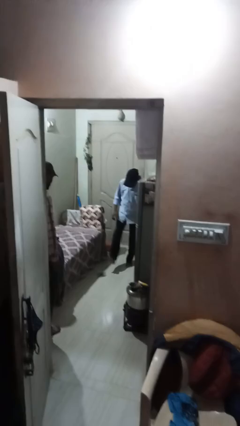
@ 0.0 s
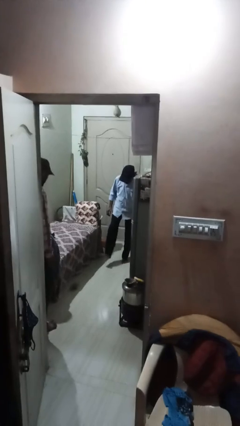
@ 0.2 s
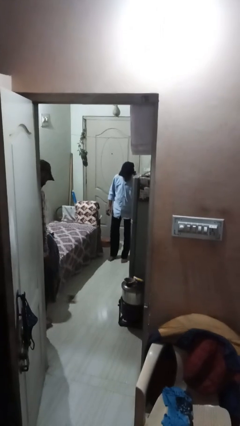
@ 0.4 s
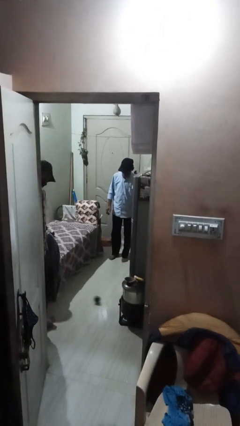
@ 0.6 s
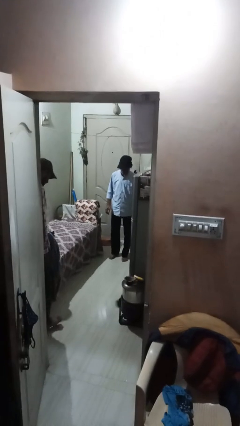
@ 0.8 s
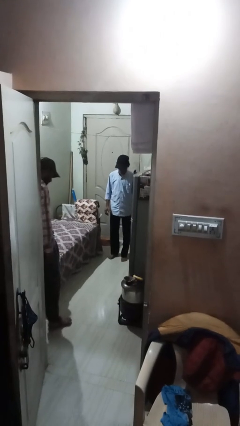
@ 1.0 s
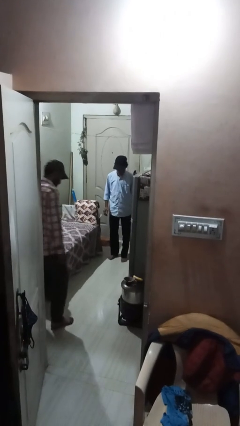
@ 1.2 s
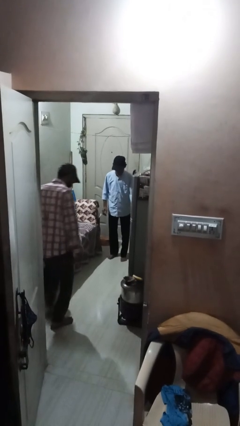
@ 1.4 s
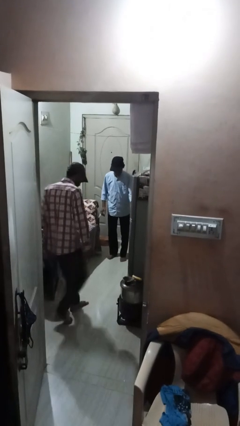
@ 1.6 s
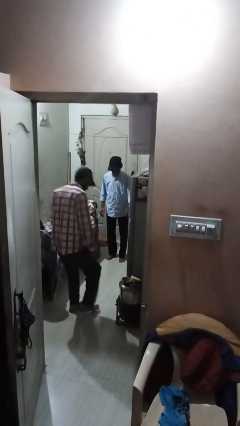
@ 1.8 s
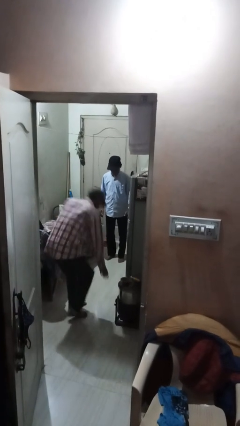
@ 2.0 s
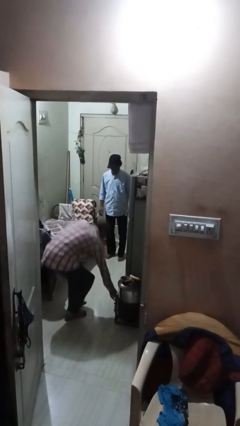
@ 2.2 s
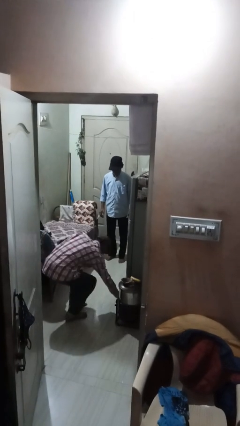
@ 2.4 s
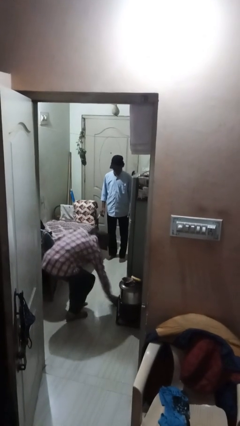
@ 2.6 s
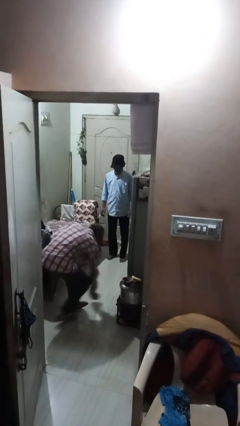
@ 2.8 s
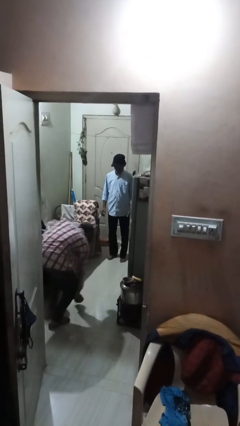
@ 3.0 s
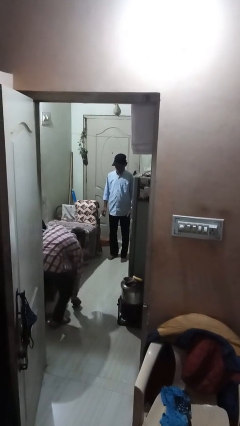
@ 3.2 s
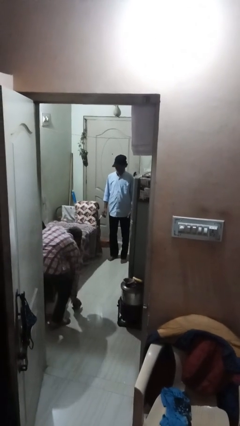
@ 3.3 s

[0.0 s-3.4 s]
person kicks object to person

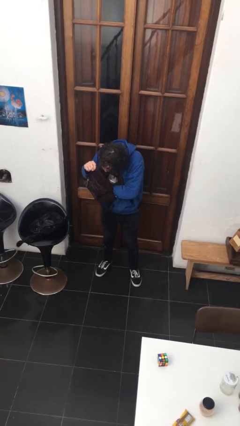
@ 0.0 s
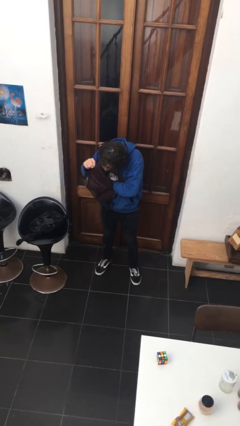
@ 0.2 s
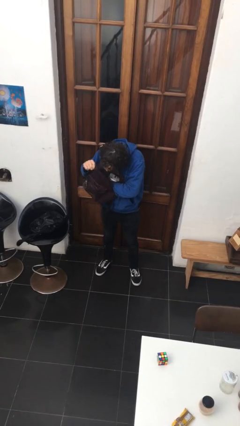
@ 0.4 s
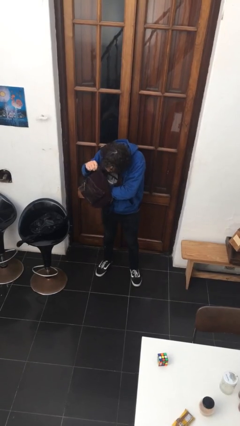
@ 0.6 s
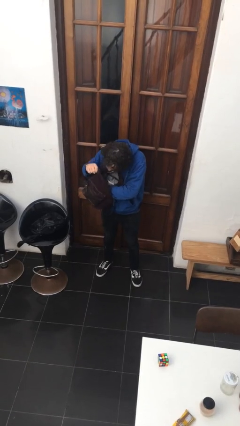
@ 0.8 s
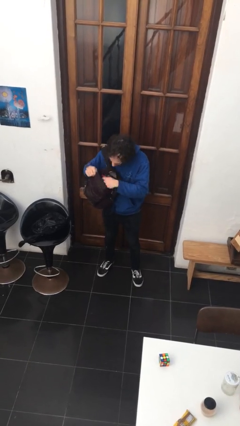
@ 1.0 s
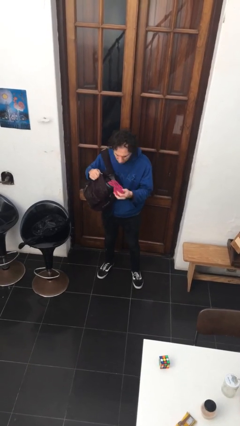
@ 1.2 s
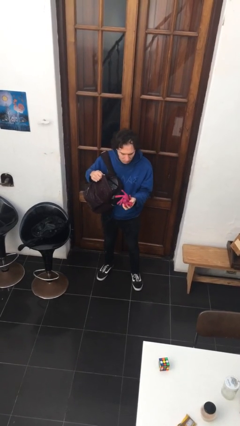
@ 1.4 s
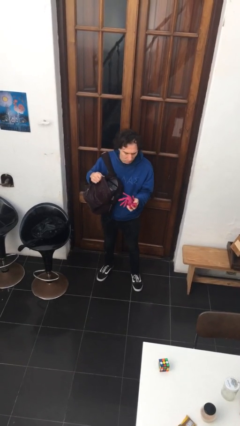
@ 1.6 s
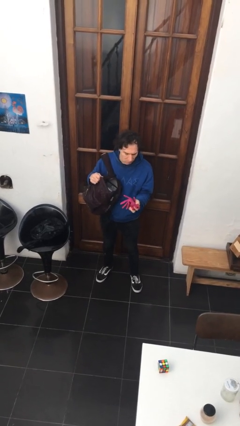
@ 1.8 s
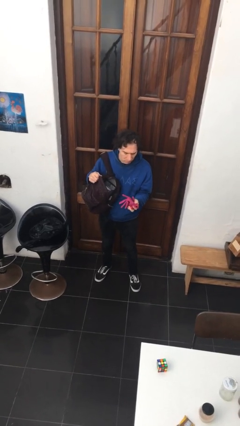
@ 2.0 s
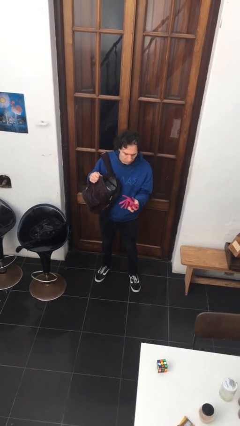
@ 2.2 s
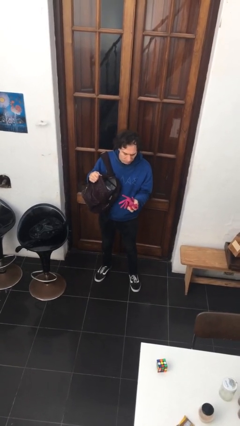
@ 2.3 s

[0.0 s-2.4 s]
person takes object from backpack

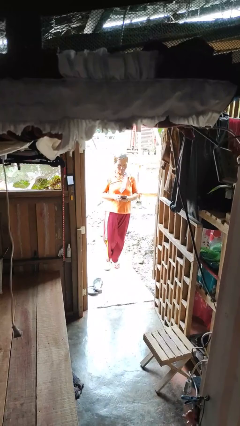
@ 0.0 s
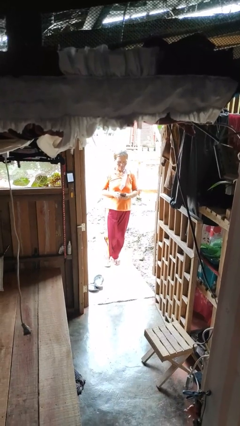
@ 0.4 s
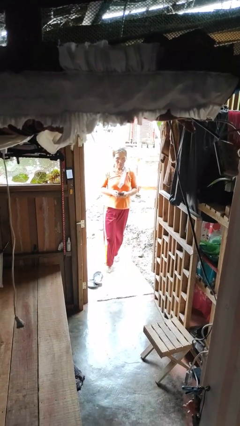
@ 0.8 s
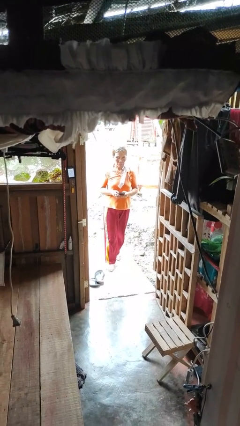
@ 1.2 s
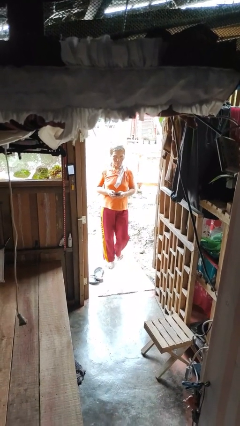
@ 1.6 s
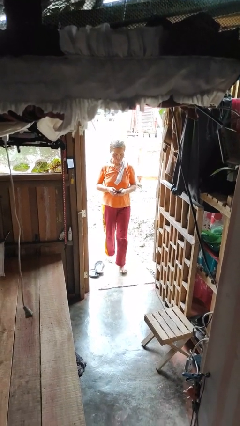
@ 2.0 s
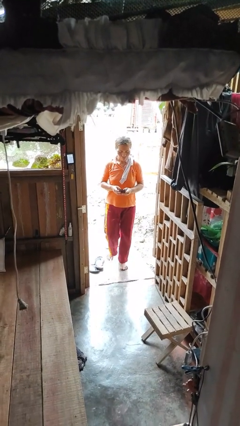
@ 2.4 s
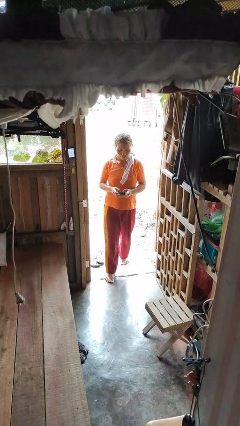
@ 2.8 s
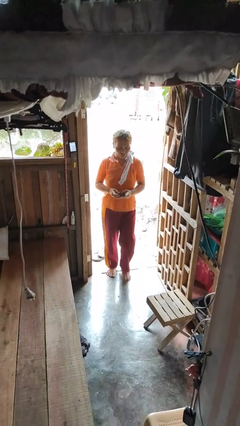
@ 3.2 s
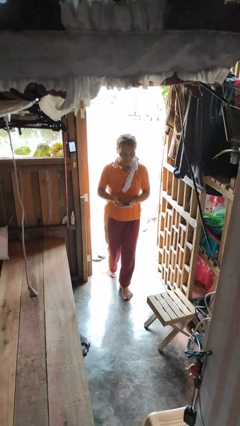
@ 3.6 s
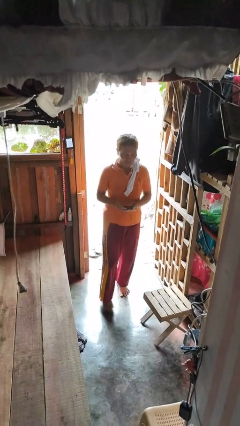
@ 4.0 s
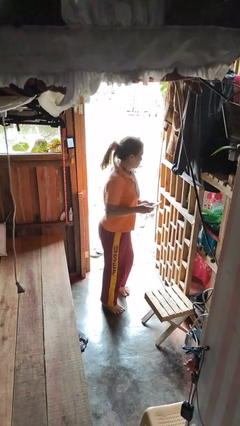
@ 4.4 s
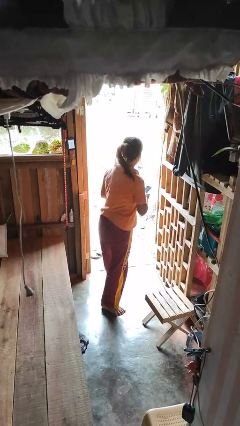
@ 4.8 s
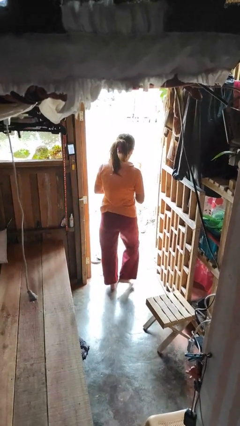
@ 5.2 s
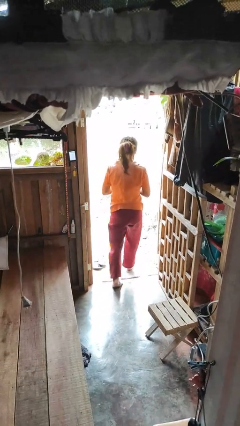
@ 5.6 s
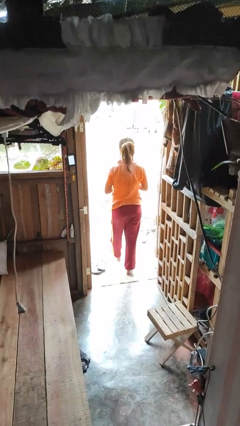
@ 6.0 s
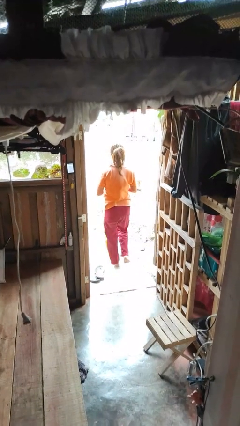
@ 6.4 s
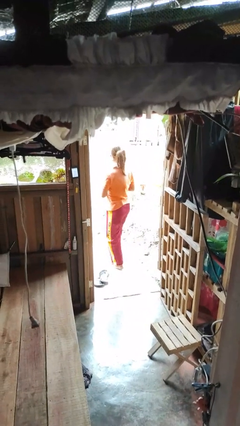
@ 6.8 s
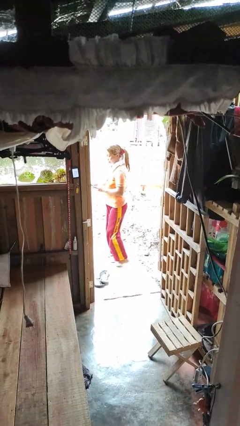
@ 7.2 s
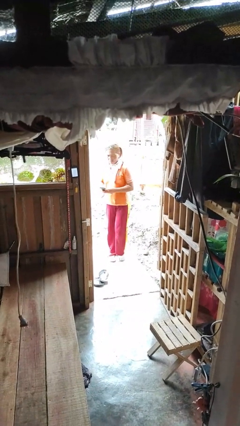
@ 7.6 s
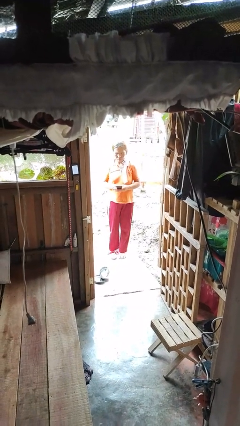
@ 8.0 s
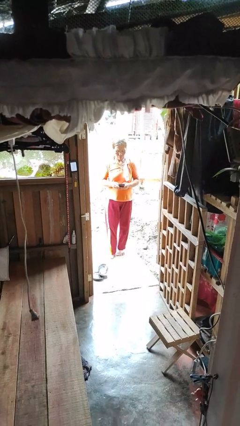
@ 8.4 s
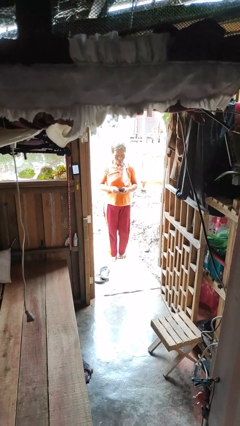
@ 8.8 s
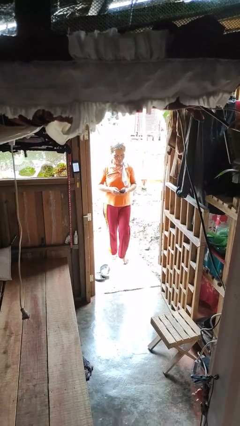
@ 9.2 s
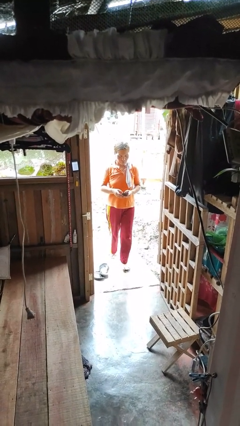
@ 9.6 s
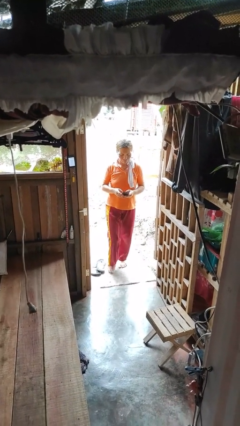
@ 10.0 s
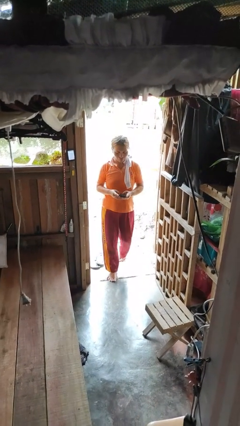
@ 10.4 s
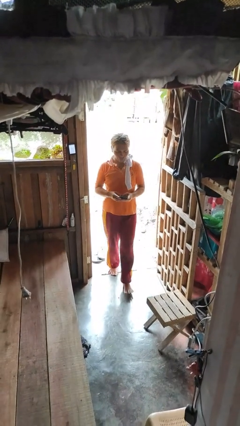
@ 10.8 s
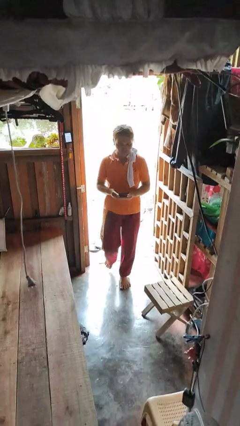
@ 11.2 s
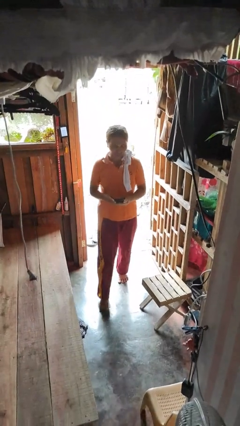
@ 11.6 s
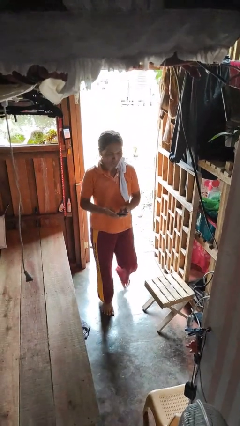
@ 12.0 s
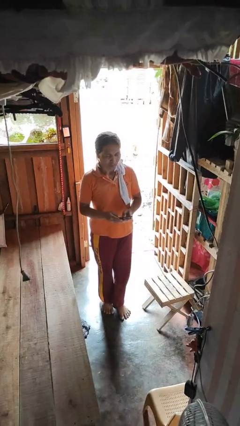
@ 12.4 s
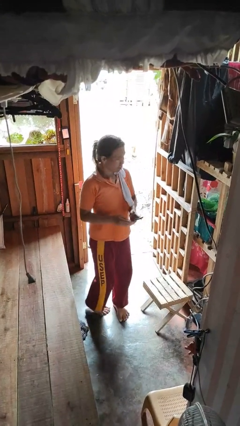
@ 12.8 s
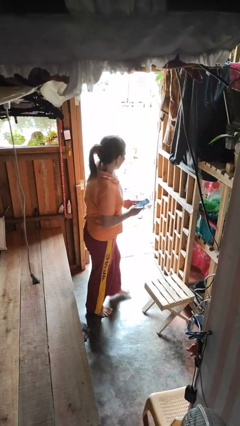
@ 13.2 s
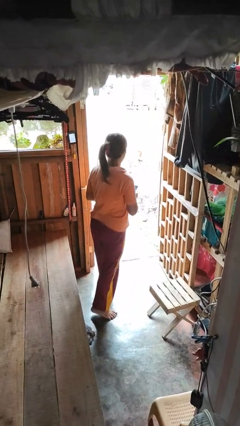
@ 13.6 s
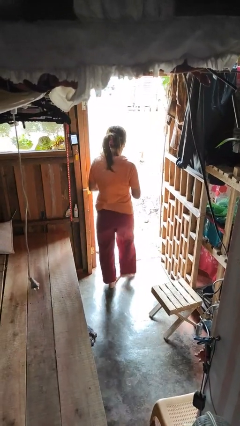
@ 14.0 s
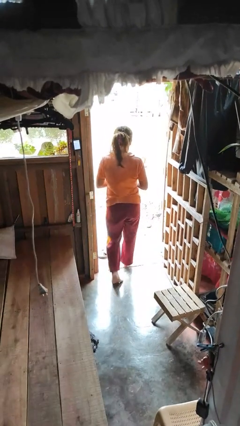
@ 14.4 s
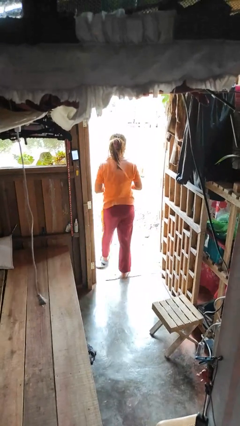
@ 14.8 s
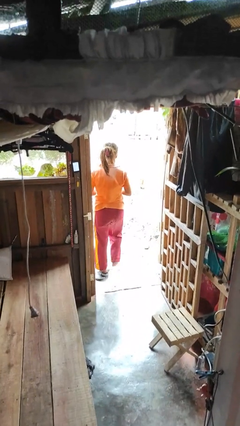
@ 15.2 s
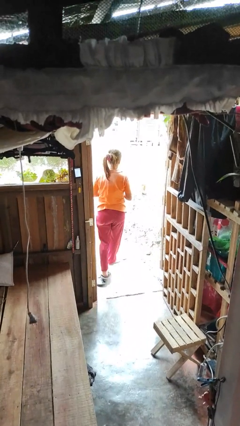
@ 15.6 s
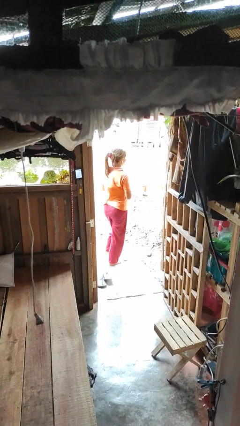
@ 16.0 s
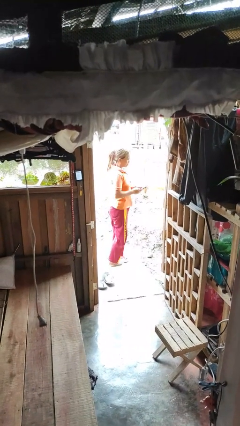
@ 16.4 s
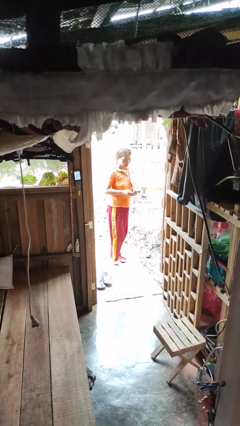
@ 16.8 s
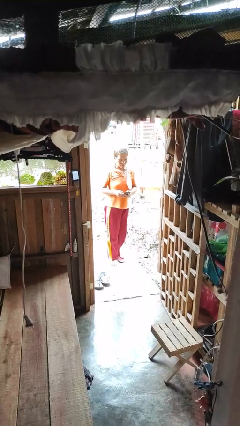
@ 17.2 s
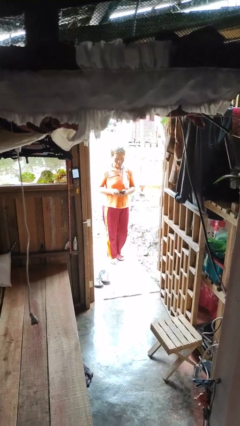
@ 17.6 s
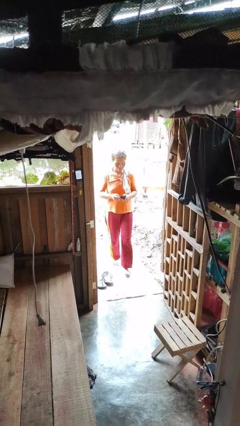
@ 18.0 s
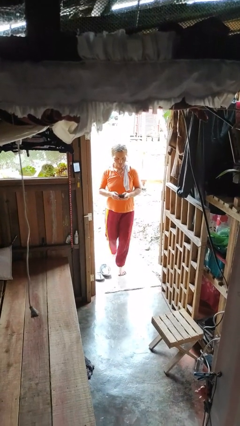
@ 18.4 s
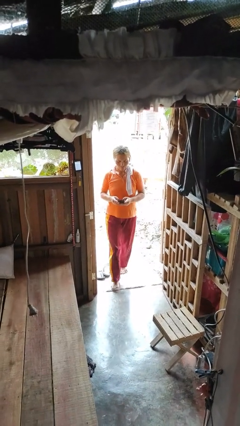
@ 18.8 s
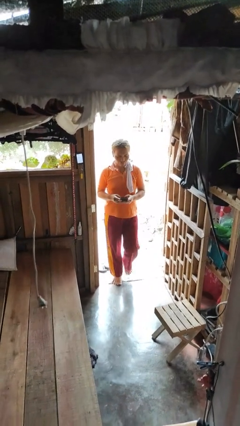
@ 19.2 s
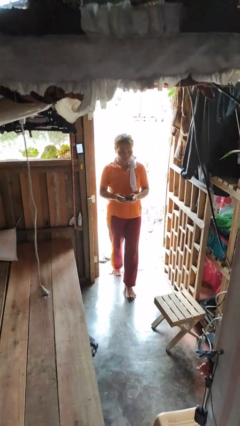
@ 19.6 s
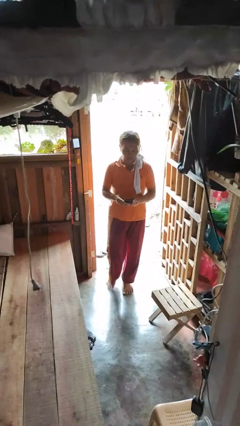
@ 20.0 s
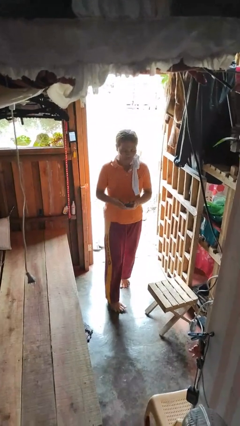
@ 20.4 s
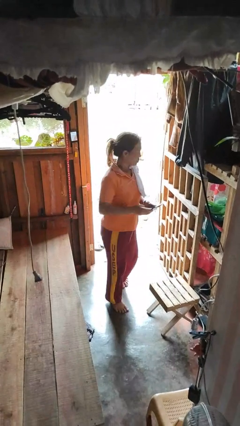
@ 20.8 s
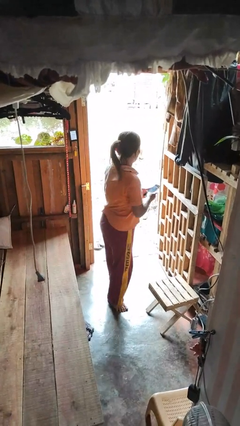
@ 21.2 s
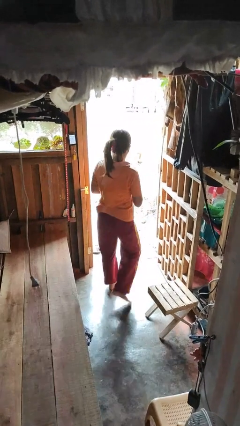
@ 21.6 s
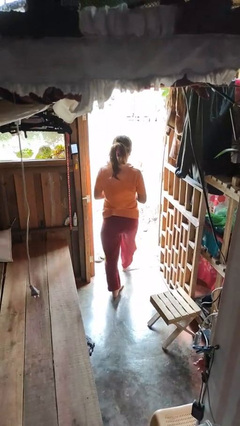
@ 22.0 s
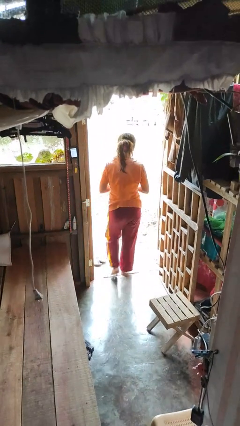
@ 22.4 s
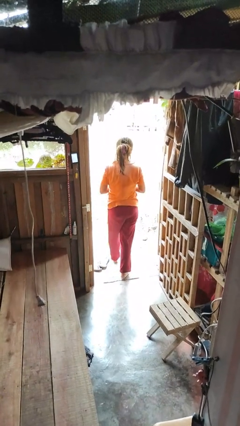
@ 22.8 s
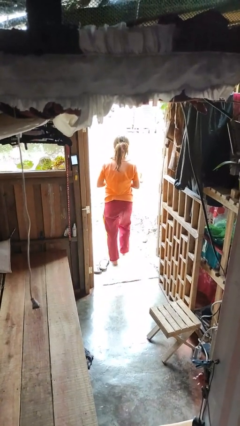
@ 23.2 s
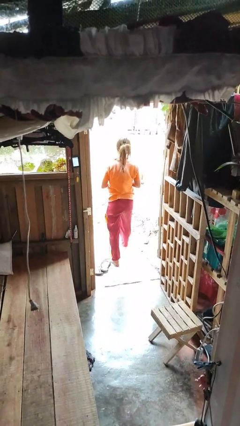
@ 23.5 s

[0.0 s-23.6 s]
person texts on phone
